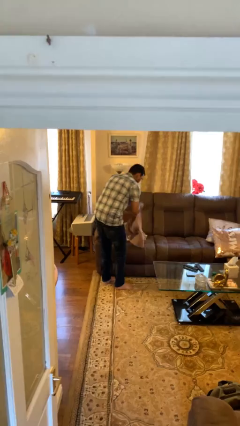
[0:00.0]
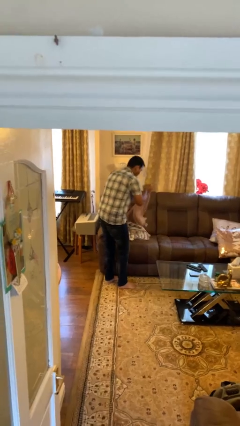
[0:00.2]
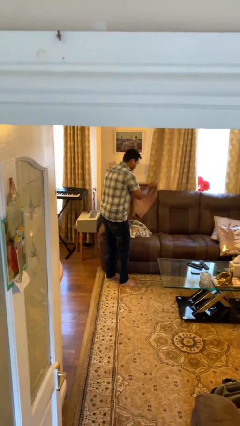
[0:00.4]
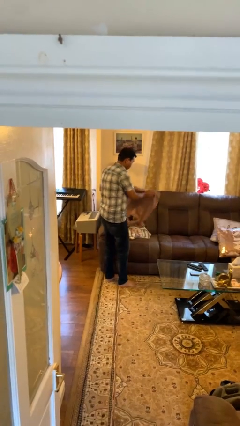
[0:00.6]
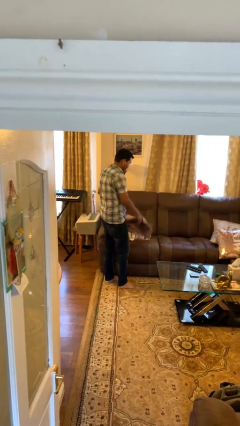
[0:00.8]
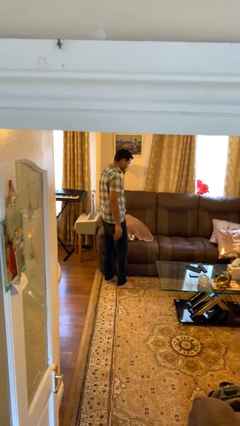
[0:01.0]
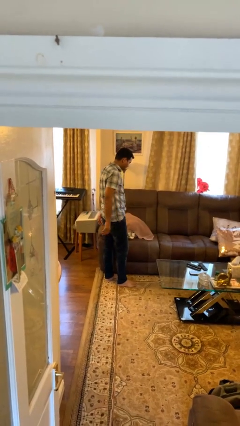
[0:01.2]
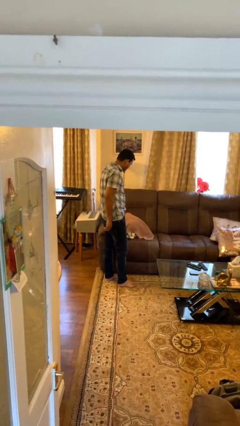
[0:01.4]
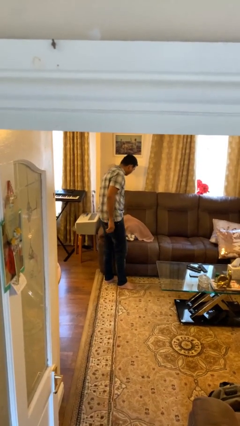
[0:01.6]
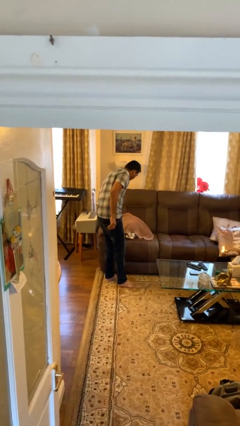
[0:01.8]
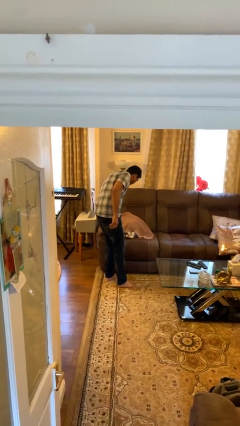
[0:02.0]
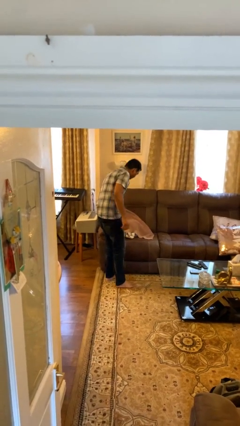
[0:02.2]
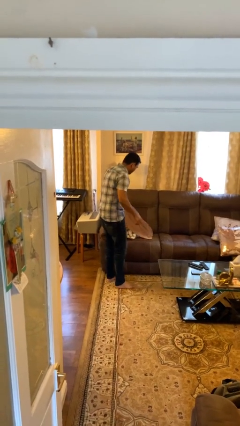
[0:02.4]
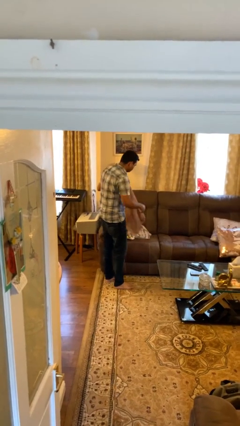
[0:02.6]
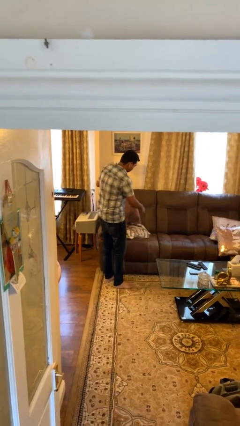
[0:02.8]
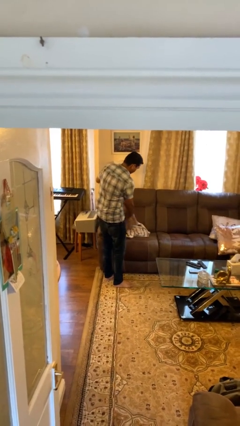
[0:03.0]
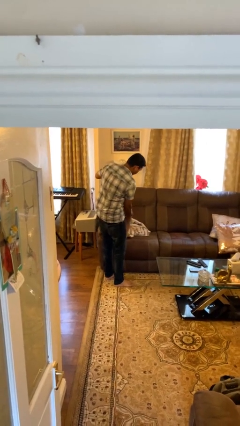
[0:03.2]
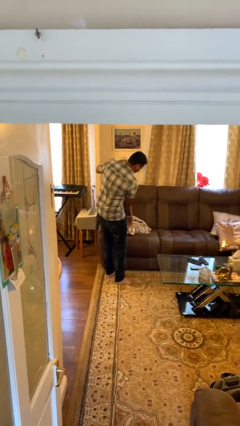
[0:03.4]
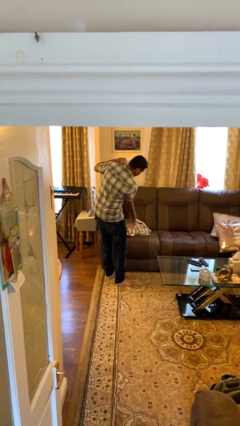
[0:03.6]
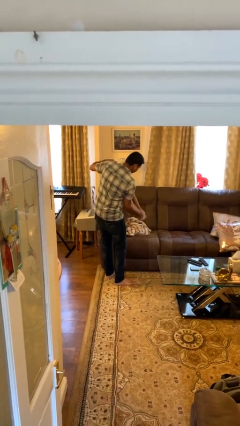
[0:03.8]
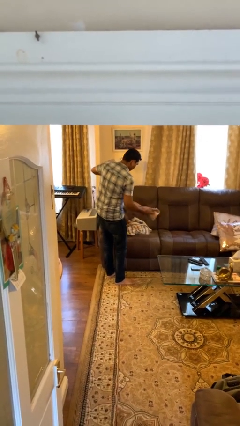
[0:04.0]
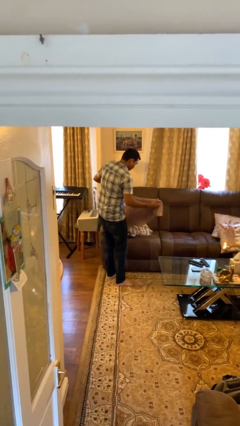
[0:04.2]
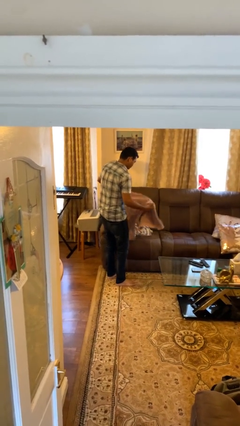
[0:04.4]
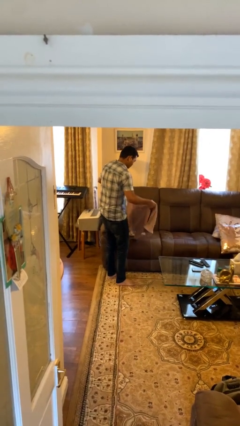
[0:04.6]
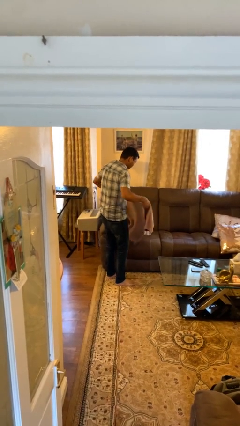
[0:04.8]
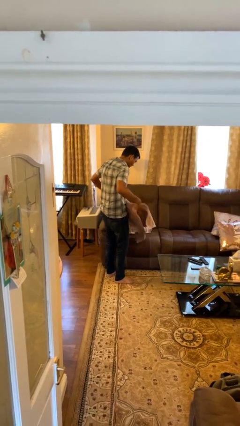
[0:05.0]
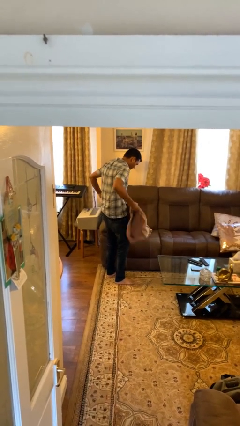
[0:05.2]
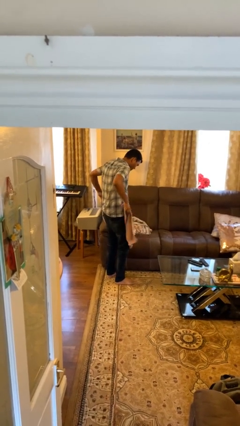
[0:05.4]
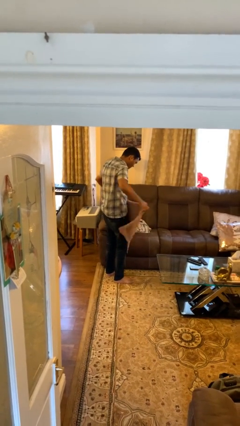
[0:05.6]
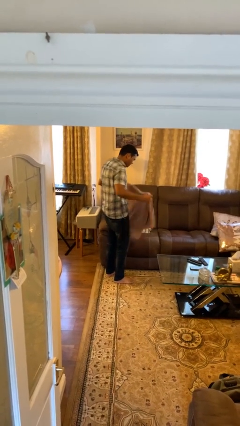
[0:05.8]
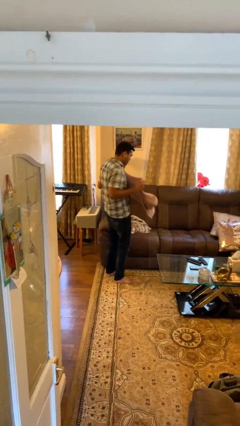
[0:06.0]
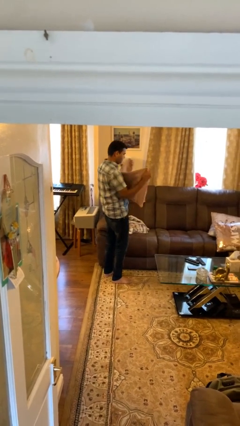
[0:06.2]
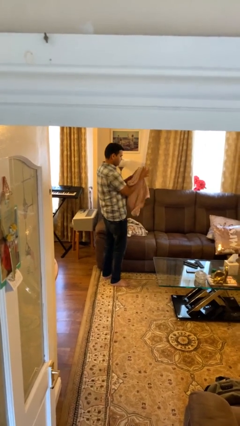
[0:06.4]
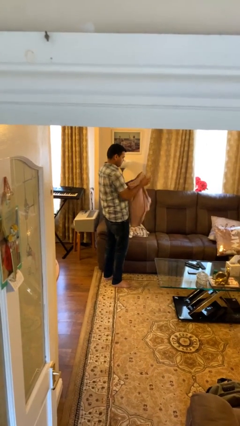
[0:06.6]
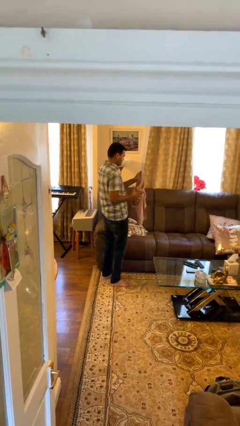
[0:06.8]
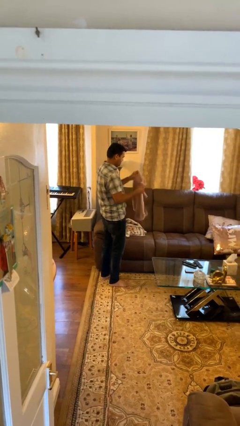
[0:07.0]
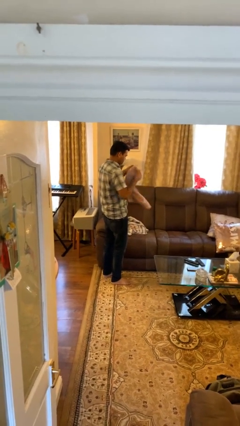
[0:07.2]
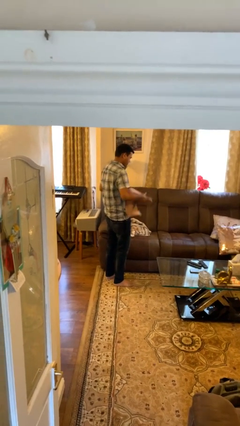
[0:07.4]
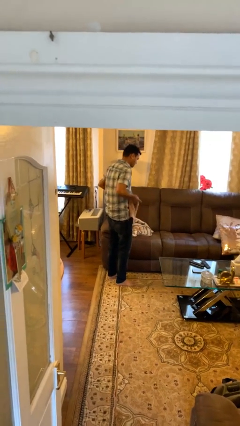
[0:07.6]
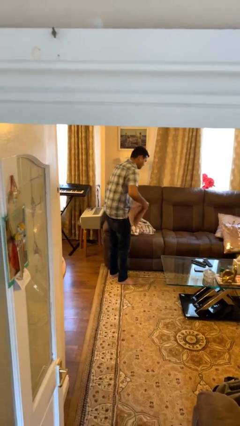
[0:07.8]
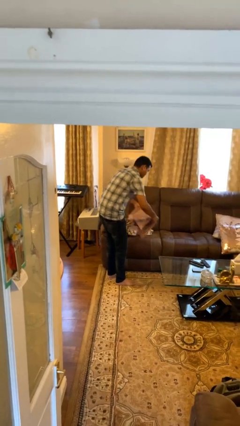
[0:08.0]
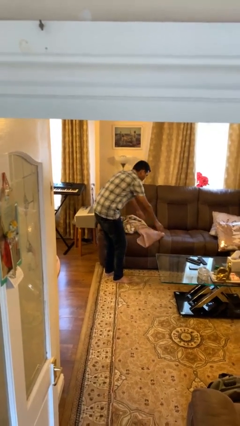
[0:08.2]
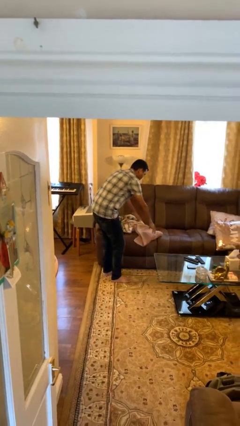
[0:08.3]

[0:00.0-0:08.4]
person folds towel

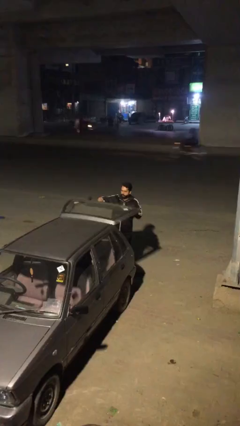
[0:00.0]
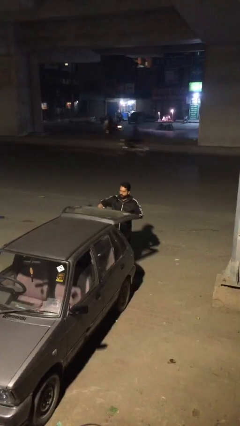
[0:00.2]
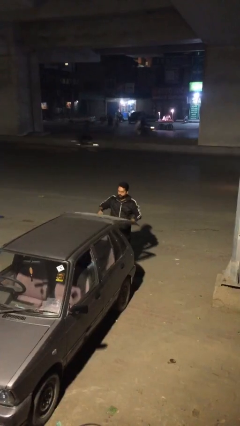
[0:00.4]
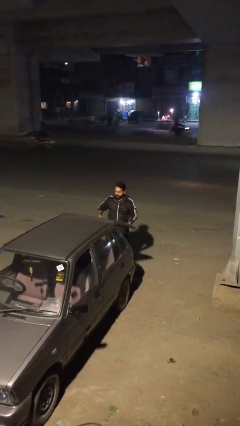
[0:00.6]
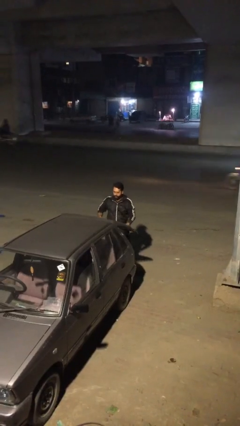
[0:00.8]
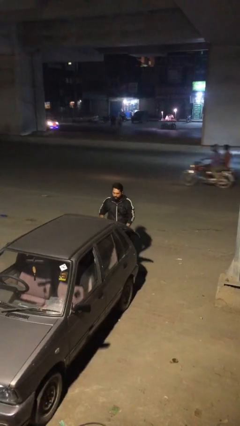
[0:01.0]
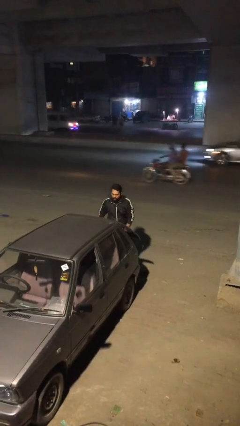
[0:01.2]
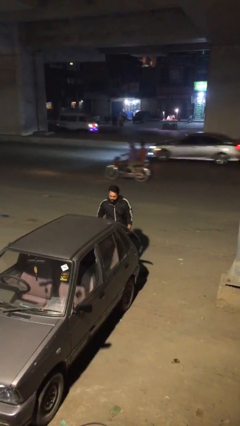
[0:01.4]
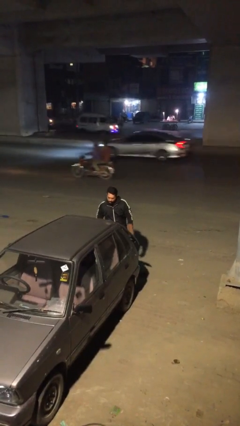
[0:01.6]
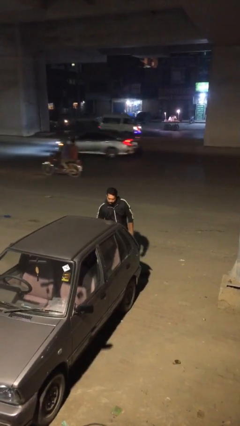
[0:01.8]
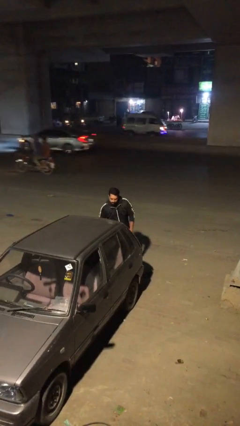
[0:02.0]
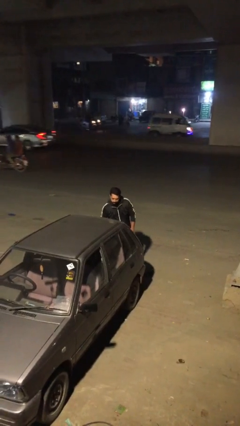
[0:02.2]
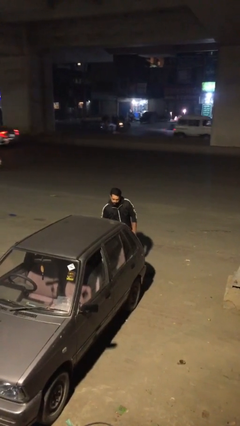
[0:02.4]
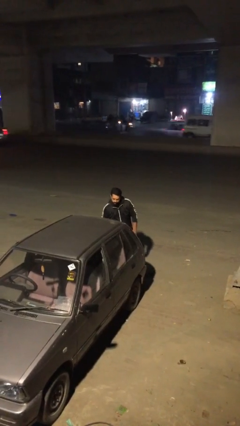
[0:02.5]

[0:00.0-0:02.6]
person closes car trunk

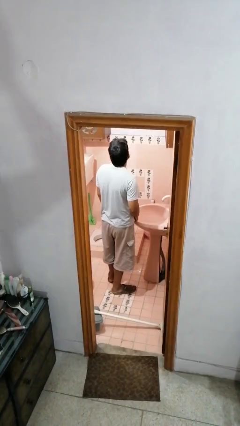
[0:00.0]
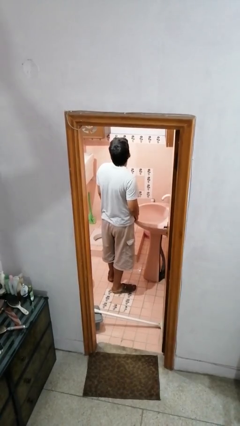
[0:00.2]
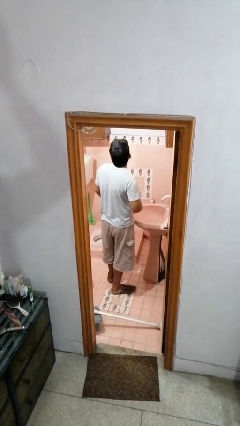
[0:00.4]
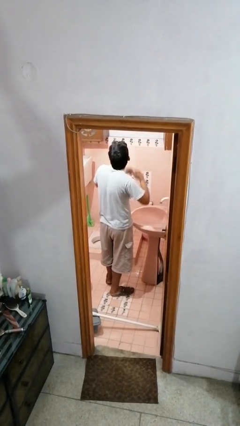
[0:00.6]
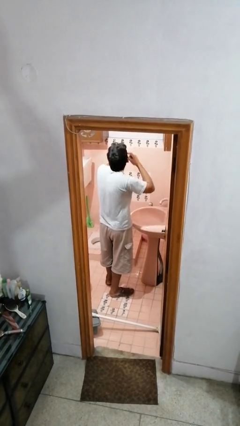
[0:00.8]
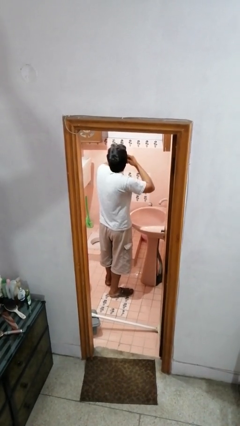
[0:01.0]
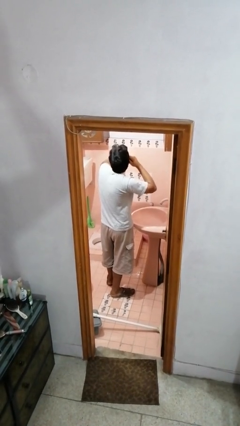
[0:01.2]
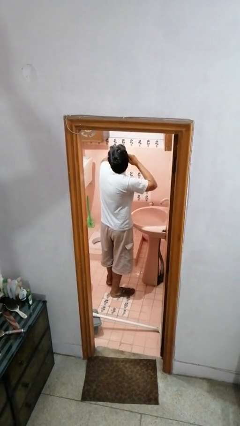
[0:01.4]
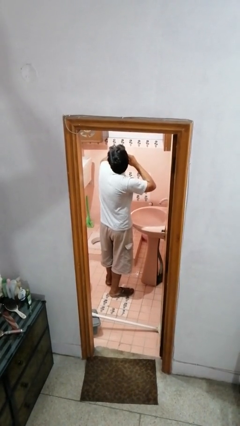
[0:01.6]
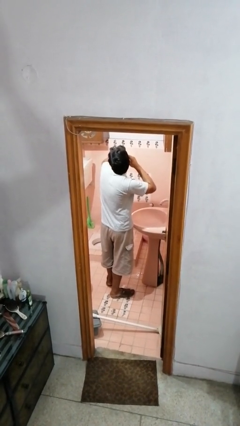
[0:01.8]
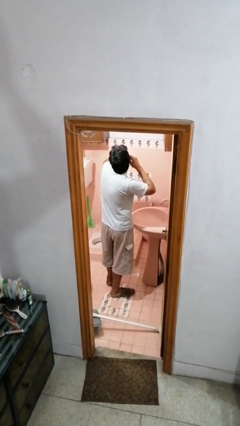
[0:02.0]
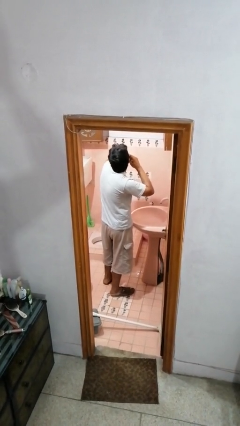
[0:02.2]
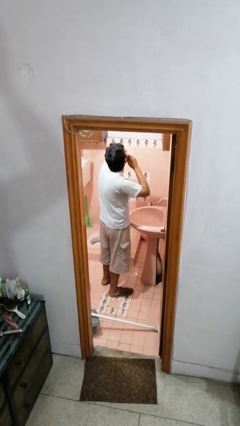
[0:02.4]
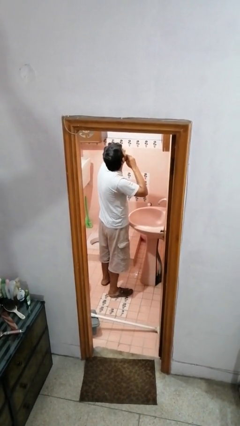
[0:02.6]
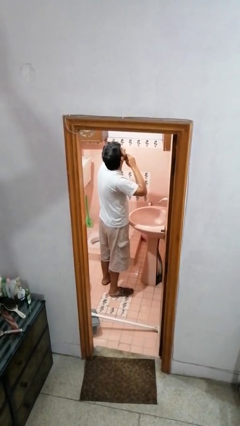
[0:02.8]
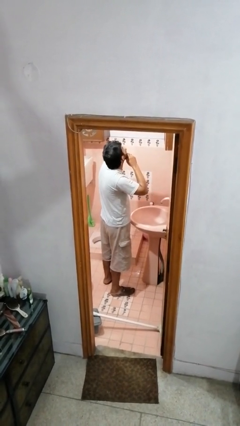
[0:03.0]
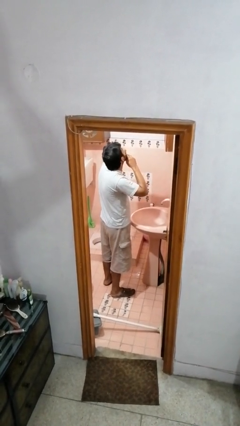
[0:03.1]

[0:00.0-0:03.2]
person flosses

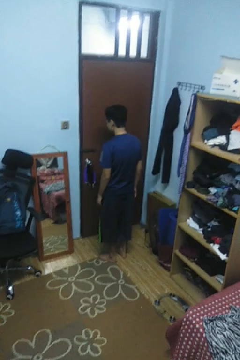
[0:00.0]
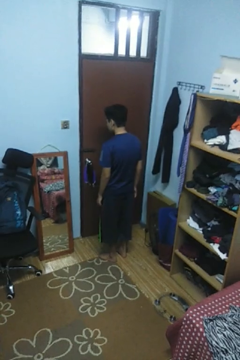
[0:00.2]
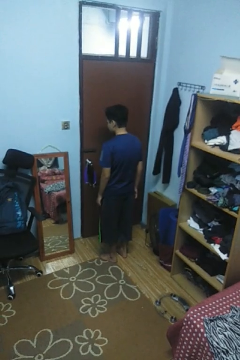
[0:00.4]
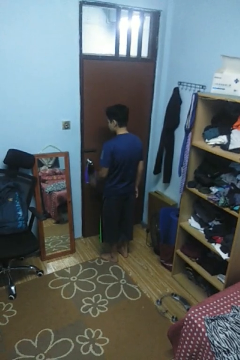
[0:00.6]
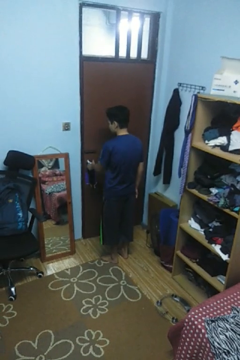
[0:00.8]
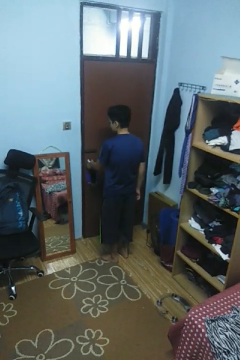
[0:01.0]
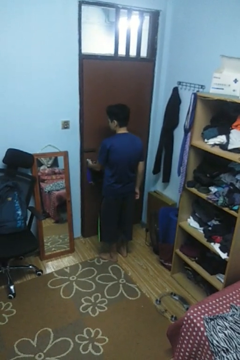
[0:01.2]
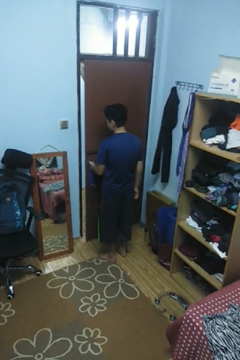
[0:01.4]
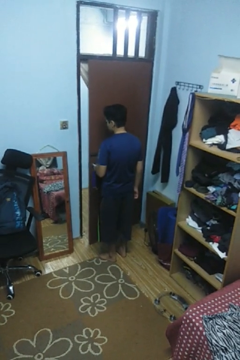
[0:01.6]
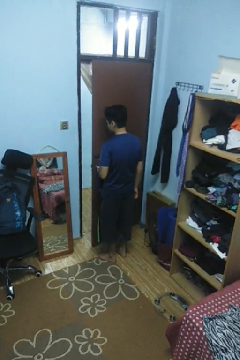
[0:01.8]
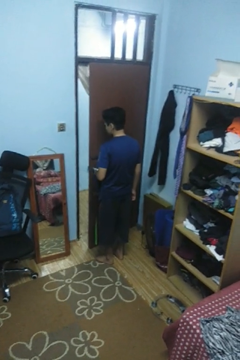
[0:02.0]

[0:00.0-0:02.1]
person opens facility door

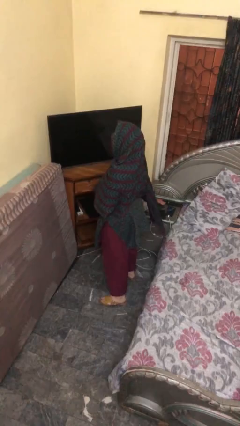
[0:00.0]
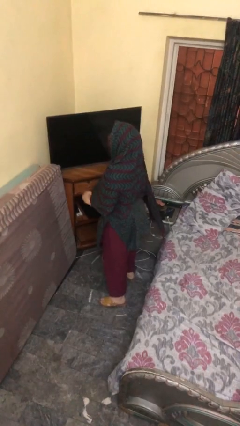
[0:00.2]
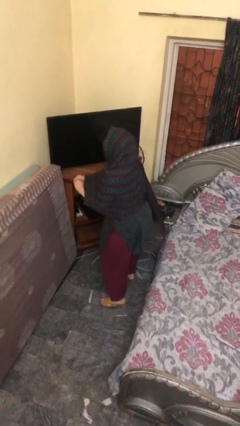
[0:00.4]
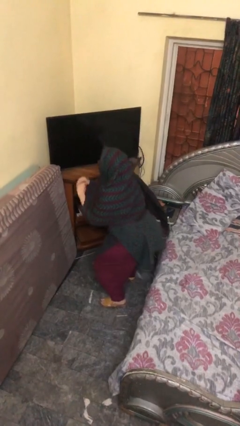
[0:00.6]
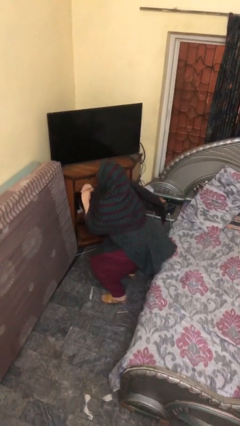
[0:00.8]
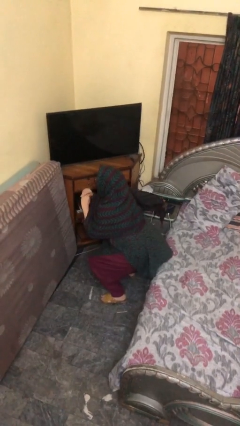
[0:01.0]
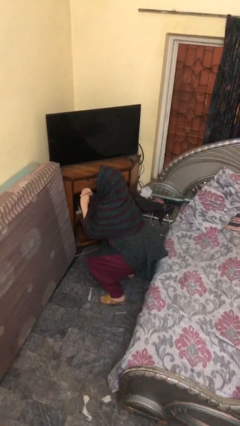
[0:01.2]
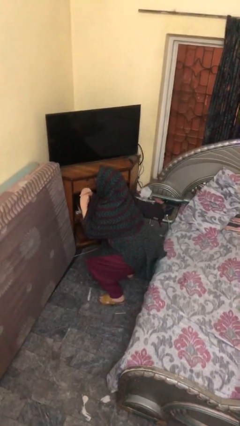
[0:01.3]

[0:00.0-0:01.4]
person squats

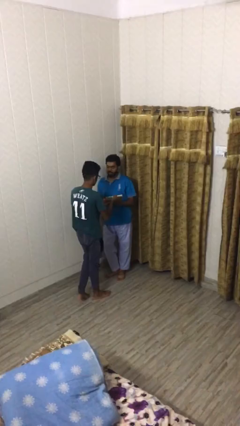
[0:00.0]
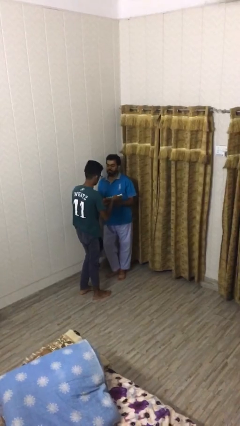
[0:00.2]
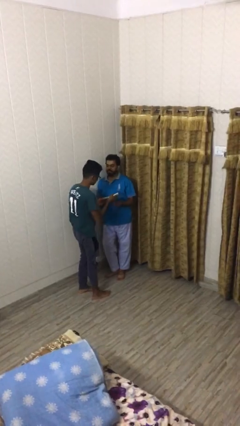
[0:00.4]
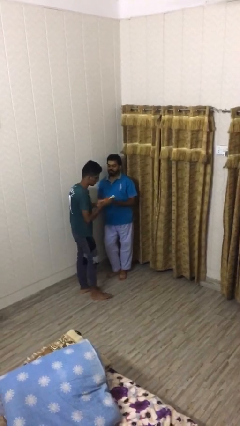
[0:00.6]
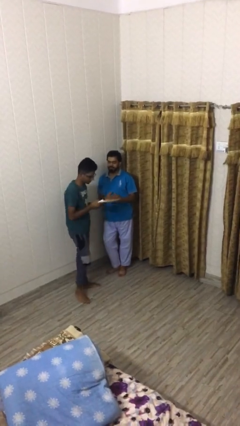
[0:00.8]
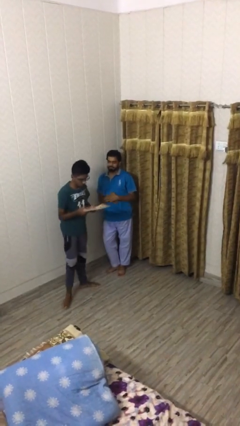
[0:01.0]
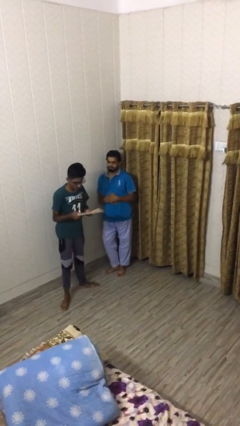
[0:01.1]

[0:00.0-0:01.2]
person transfers object to person
